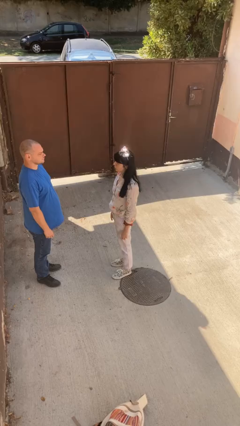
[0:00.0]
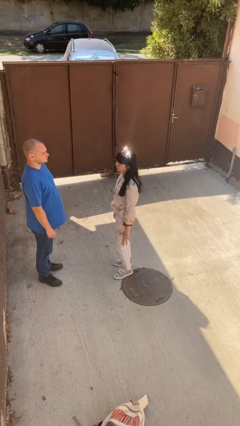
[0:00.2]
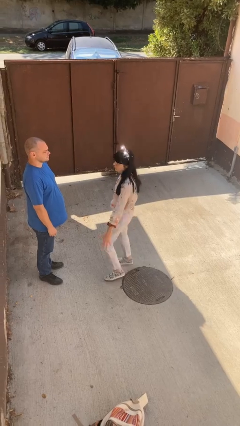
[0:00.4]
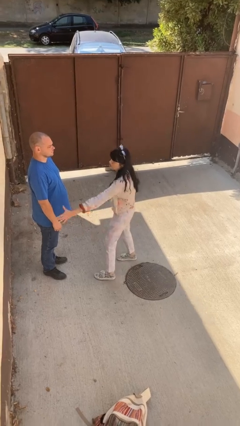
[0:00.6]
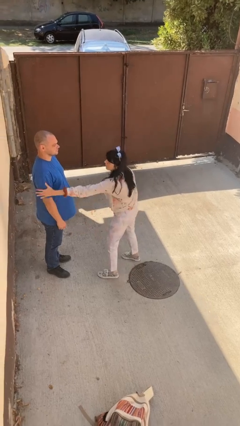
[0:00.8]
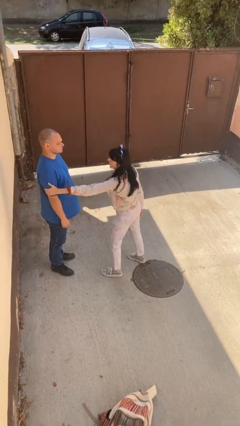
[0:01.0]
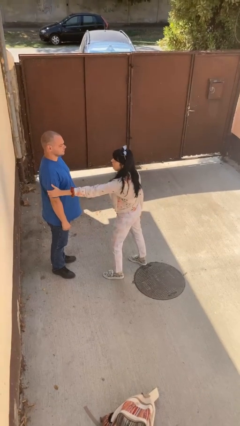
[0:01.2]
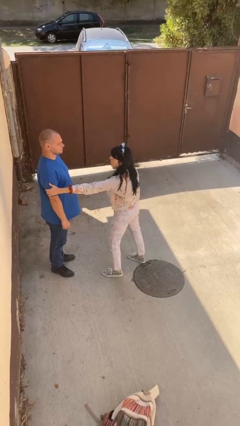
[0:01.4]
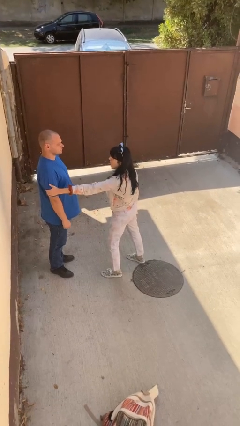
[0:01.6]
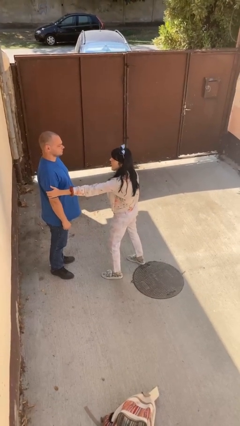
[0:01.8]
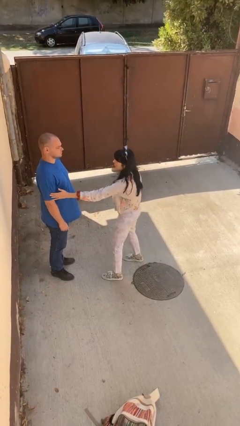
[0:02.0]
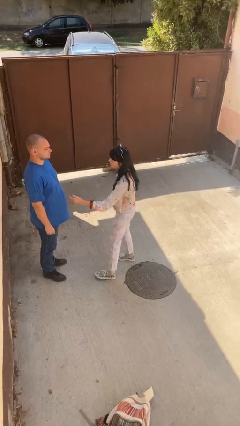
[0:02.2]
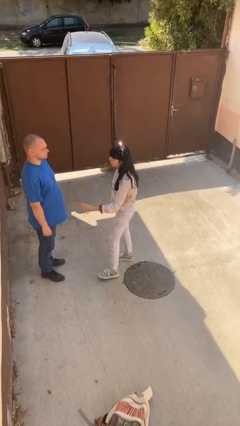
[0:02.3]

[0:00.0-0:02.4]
person grabs person by bicep

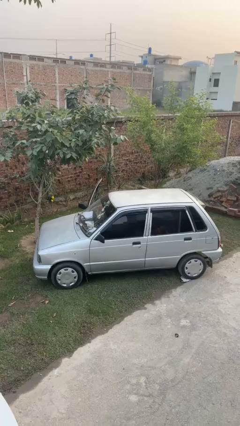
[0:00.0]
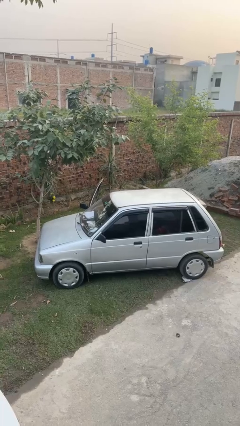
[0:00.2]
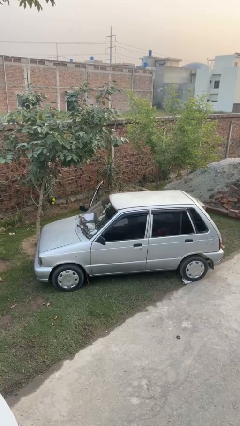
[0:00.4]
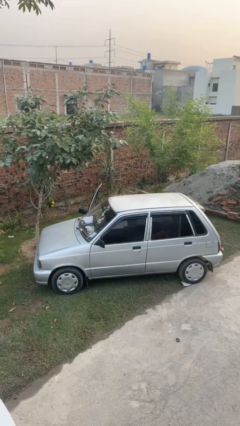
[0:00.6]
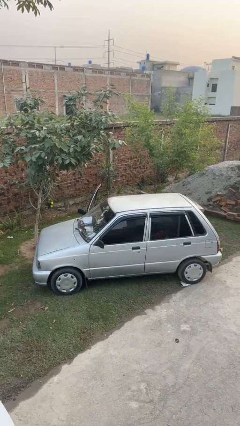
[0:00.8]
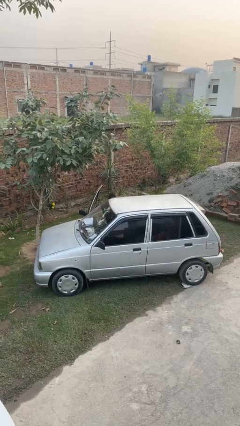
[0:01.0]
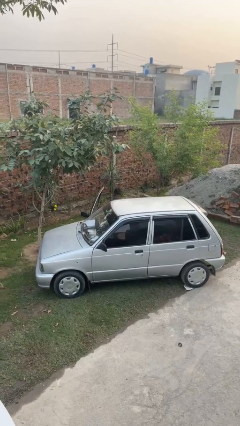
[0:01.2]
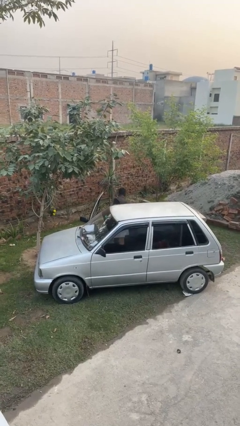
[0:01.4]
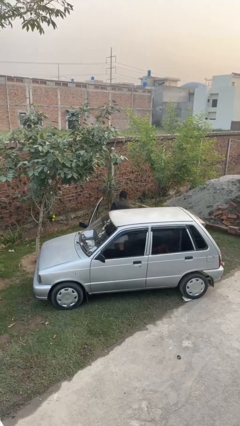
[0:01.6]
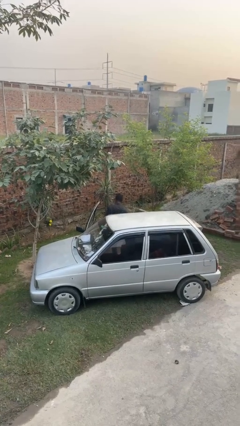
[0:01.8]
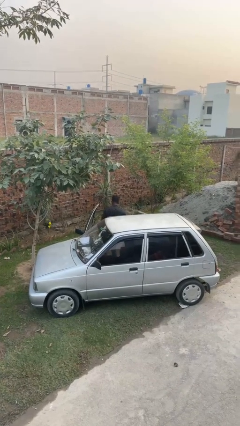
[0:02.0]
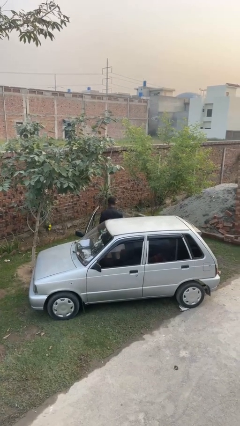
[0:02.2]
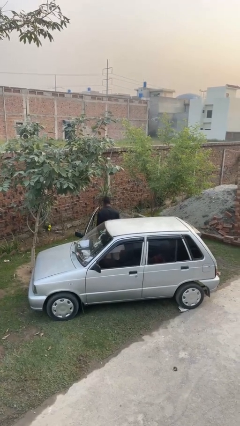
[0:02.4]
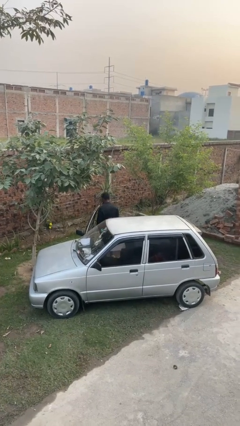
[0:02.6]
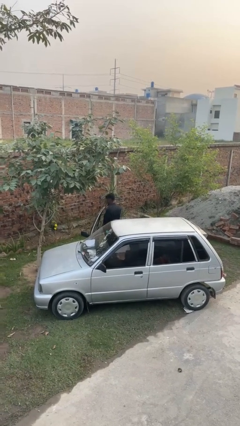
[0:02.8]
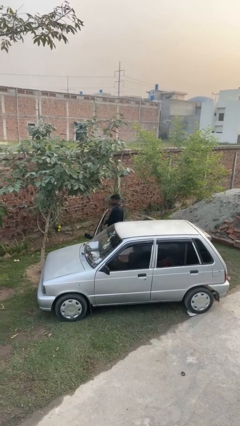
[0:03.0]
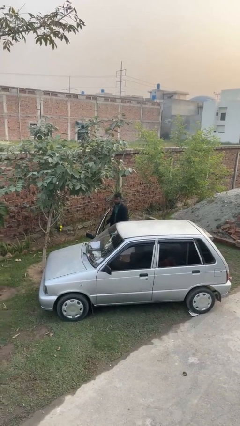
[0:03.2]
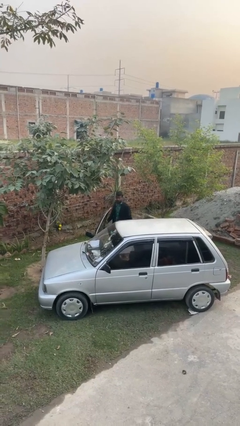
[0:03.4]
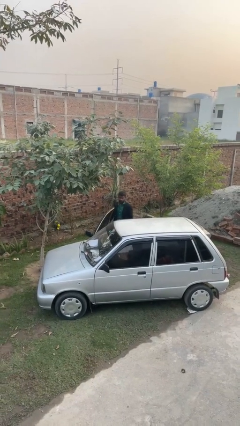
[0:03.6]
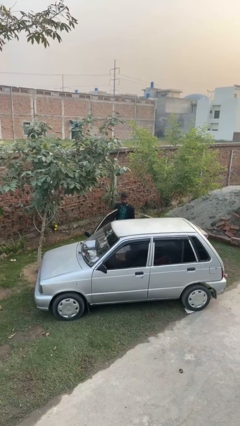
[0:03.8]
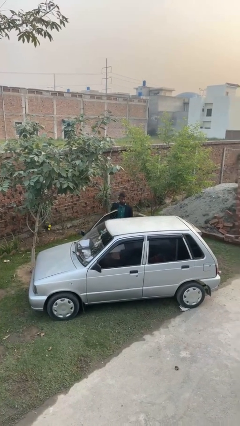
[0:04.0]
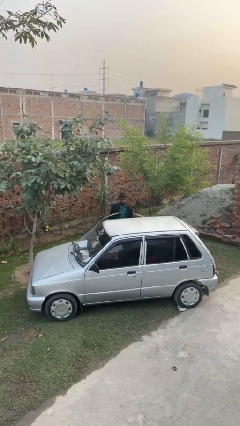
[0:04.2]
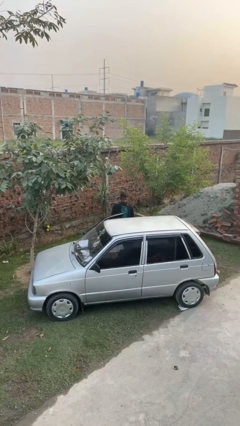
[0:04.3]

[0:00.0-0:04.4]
person exits car

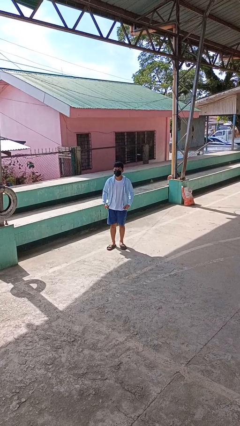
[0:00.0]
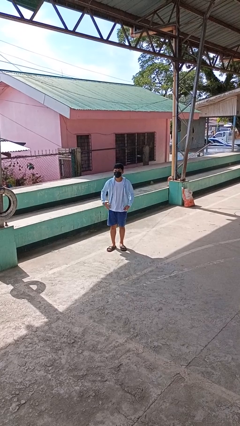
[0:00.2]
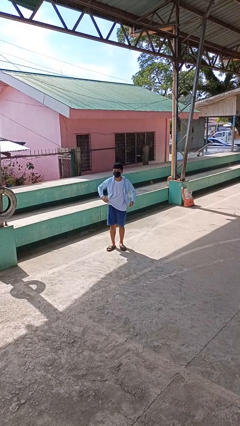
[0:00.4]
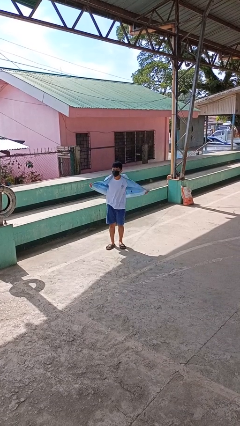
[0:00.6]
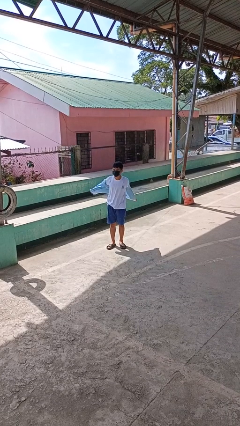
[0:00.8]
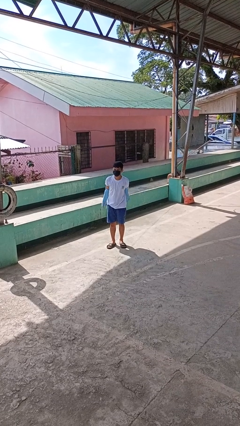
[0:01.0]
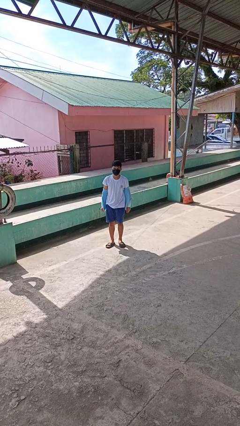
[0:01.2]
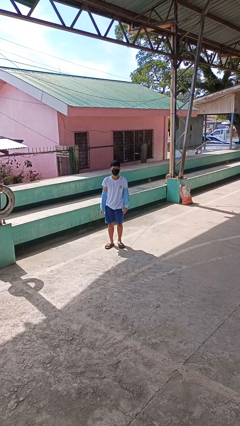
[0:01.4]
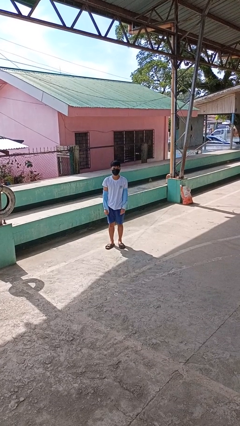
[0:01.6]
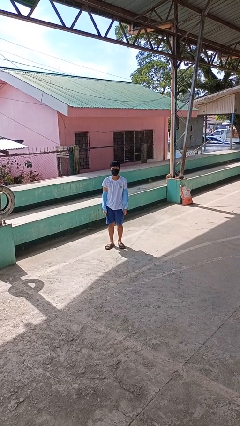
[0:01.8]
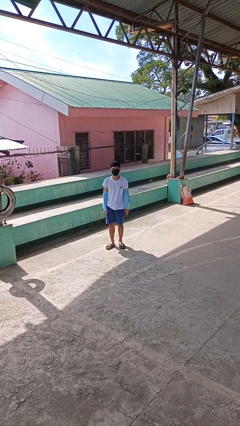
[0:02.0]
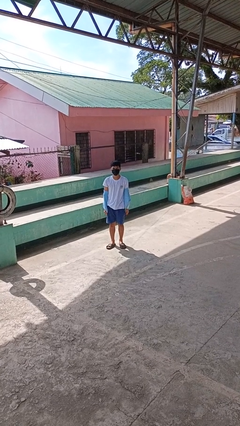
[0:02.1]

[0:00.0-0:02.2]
person takes off jacket

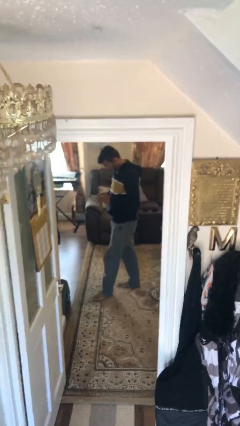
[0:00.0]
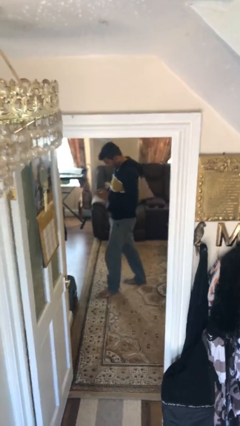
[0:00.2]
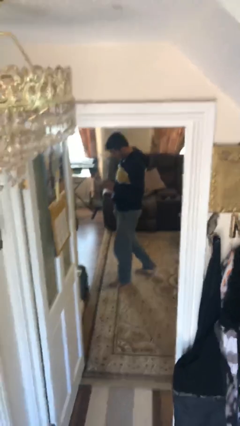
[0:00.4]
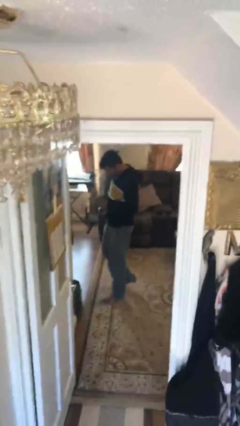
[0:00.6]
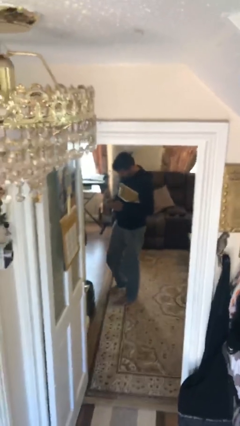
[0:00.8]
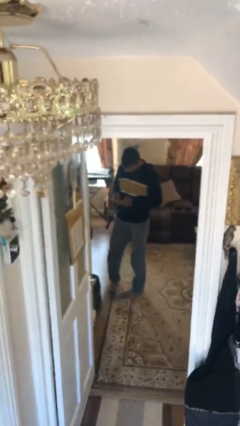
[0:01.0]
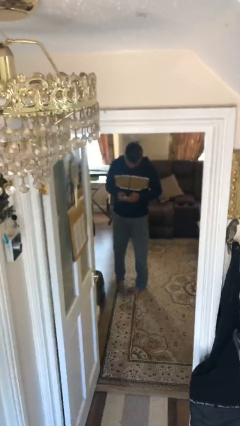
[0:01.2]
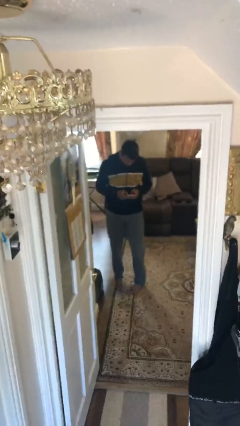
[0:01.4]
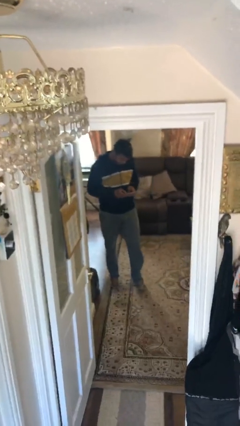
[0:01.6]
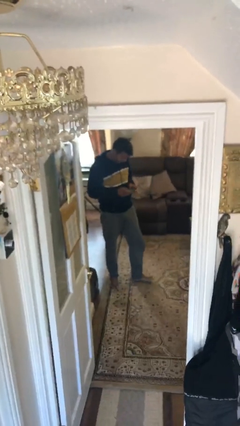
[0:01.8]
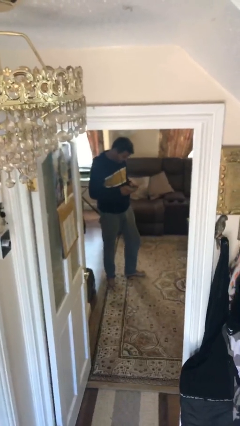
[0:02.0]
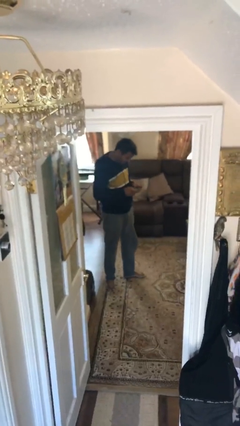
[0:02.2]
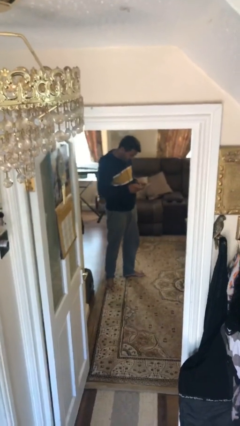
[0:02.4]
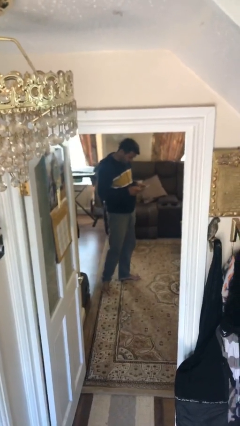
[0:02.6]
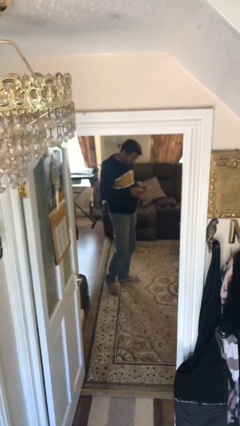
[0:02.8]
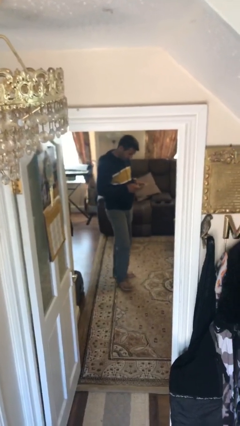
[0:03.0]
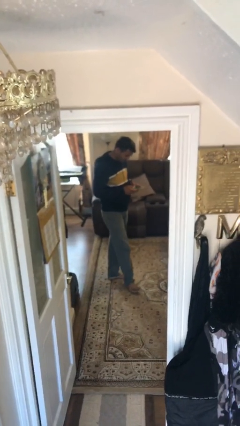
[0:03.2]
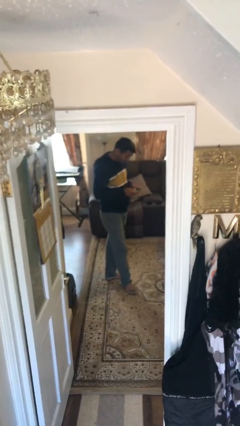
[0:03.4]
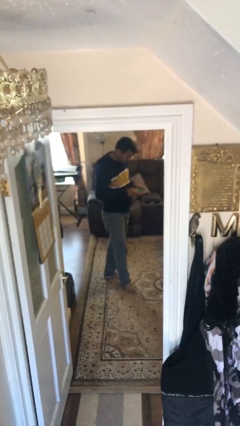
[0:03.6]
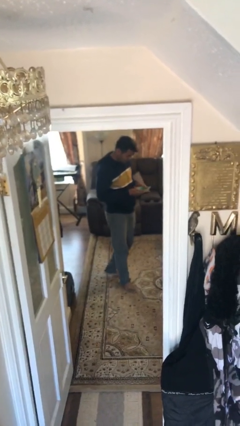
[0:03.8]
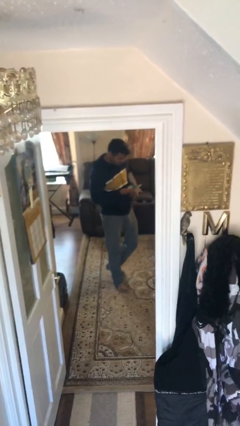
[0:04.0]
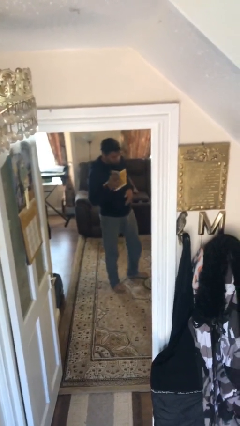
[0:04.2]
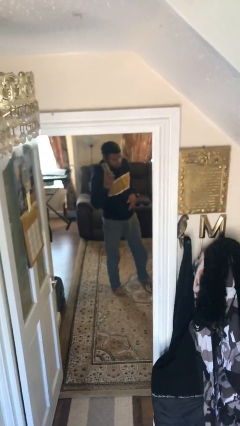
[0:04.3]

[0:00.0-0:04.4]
person texts on phone

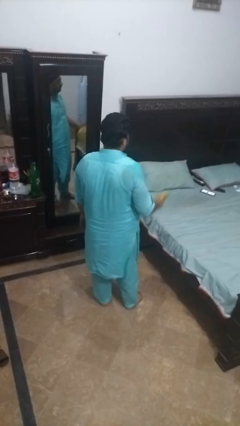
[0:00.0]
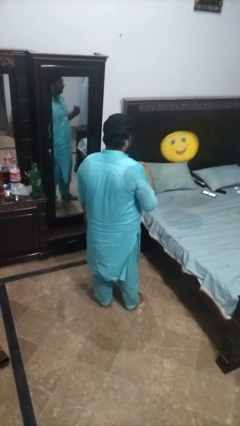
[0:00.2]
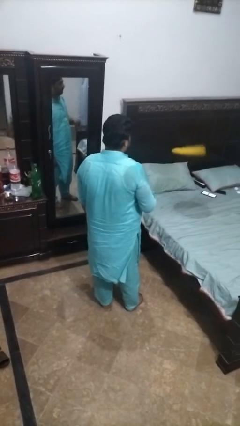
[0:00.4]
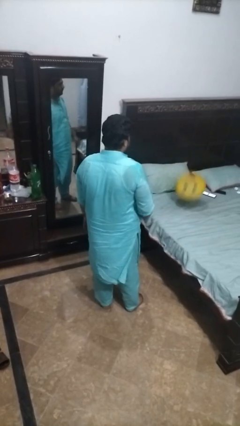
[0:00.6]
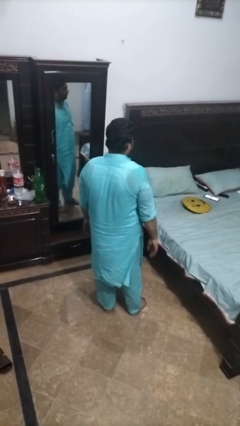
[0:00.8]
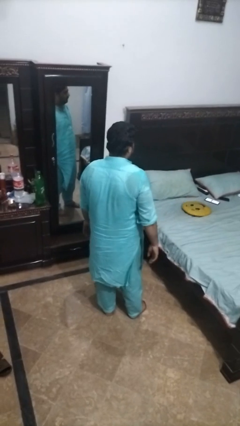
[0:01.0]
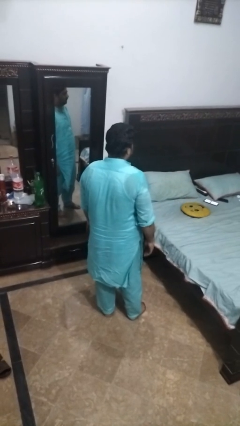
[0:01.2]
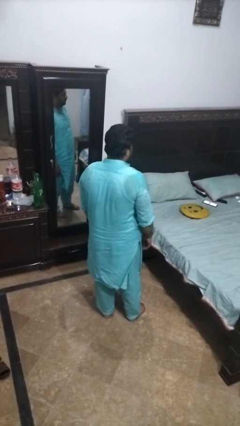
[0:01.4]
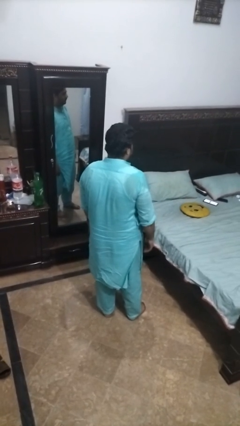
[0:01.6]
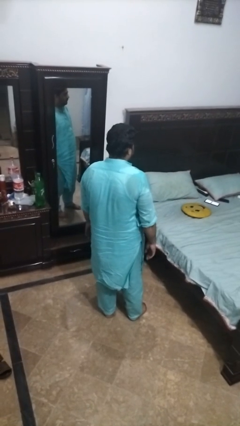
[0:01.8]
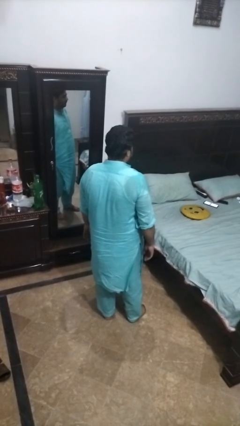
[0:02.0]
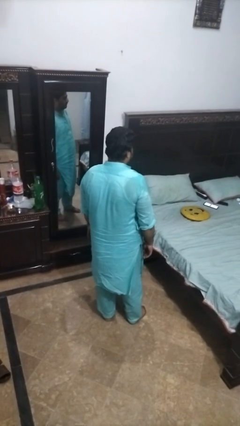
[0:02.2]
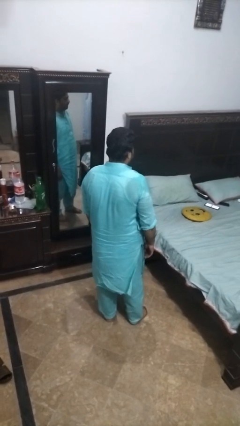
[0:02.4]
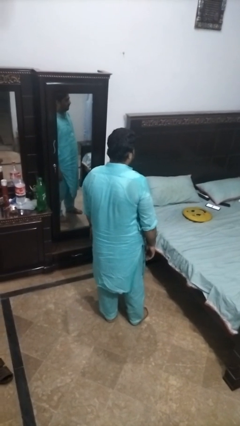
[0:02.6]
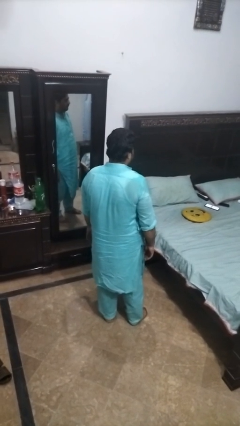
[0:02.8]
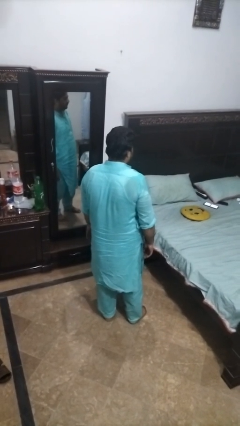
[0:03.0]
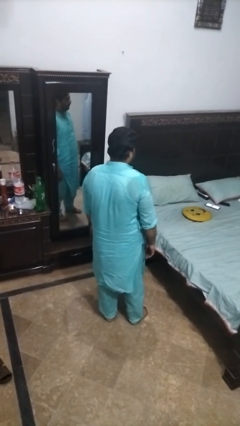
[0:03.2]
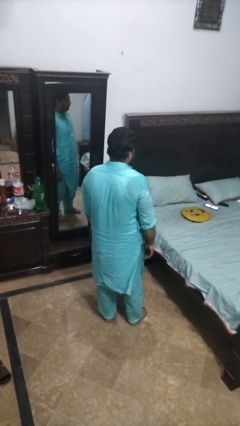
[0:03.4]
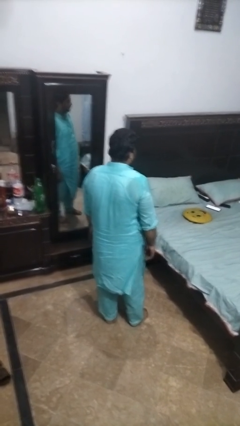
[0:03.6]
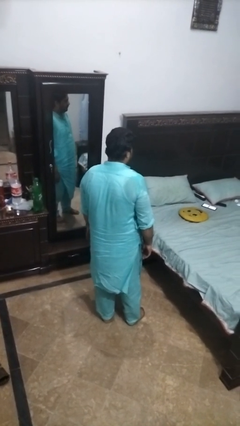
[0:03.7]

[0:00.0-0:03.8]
person throws object on bed
